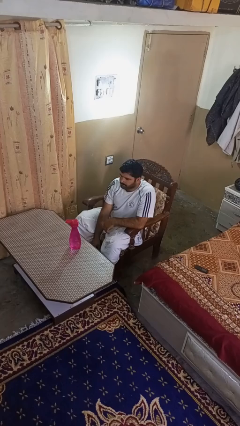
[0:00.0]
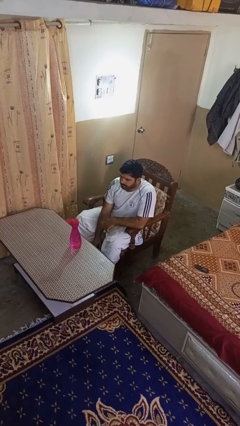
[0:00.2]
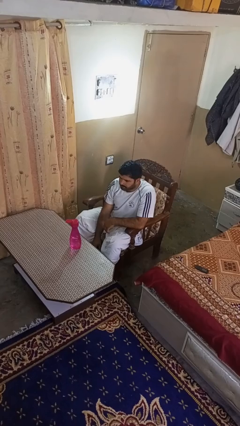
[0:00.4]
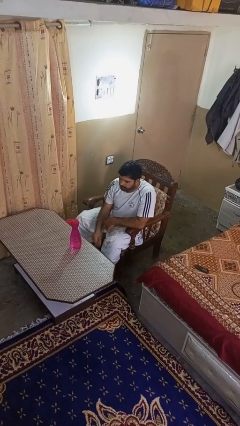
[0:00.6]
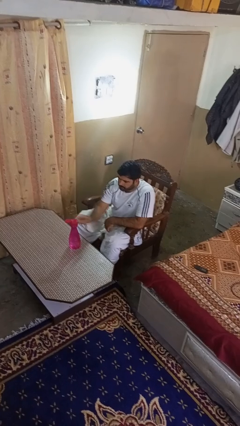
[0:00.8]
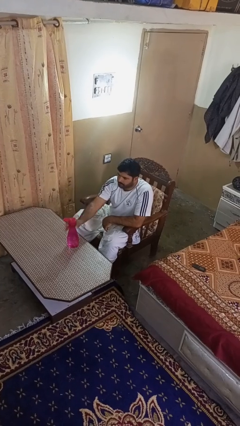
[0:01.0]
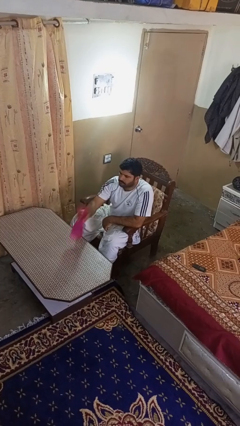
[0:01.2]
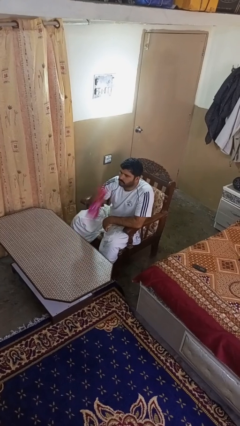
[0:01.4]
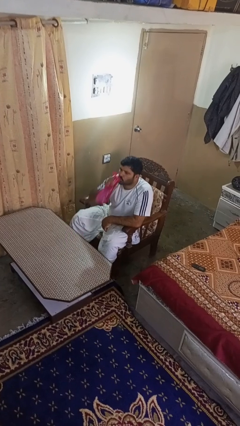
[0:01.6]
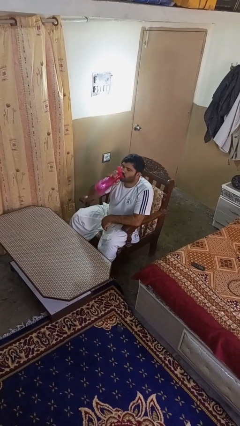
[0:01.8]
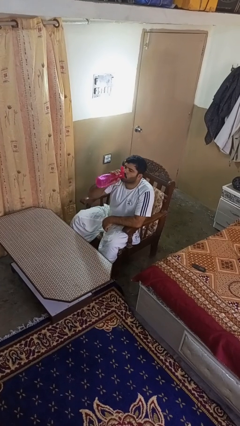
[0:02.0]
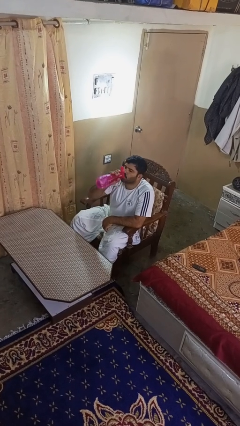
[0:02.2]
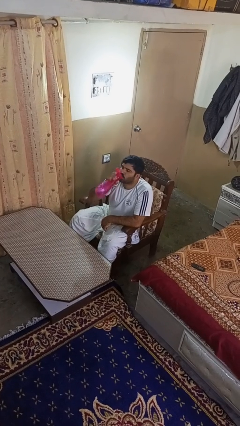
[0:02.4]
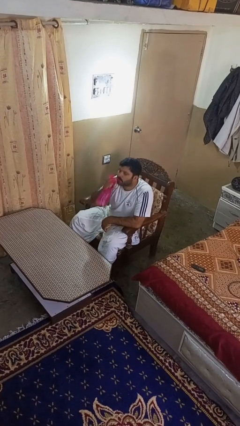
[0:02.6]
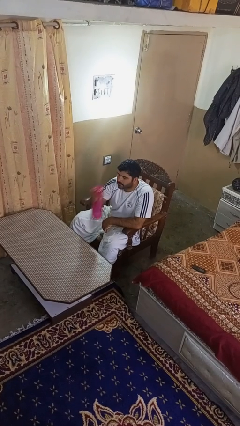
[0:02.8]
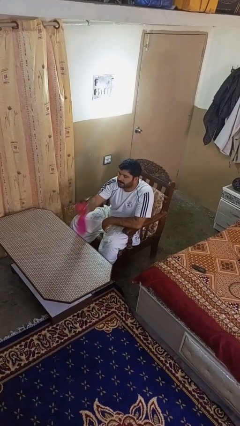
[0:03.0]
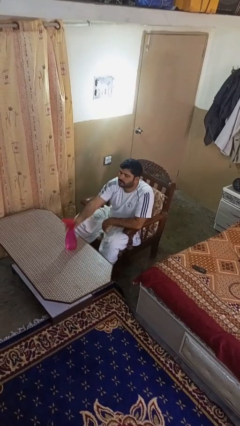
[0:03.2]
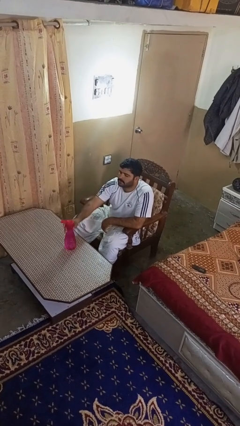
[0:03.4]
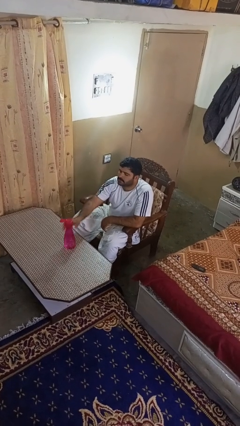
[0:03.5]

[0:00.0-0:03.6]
person drinks from bottle

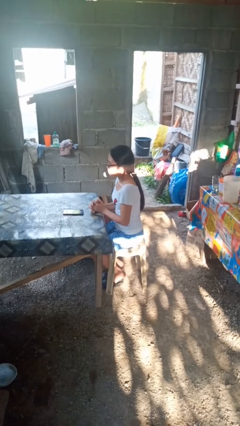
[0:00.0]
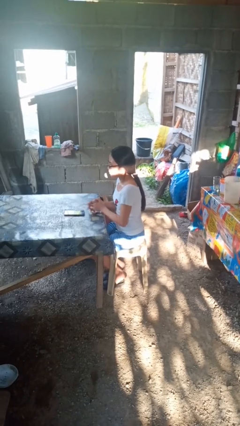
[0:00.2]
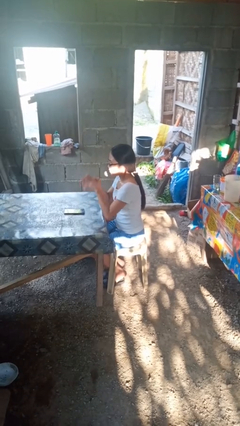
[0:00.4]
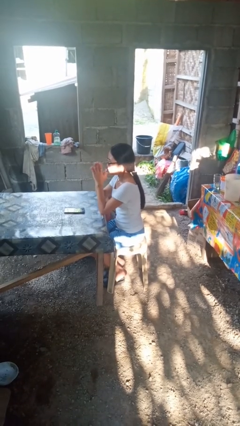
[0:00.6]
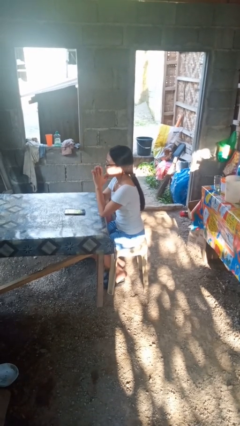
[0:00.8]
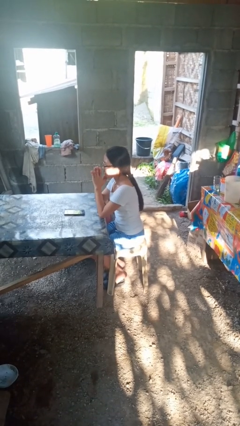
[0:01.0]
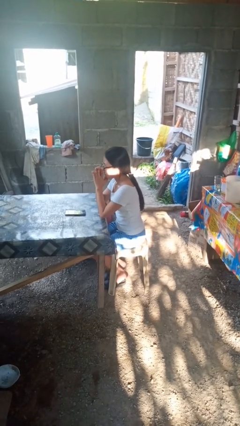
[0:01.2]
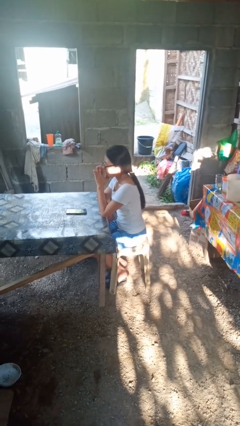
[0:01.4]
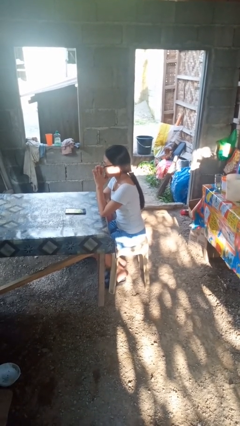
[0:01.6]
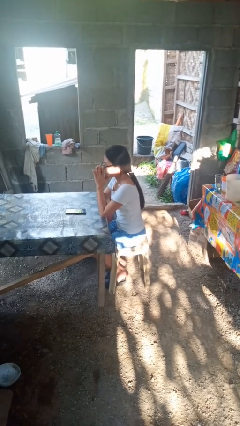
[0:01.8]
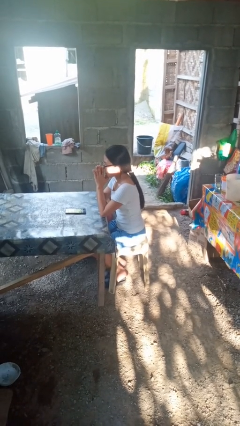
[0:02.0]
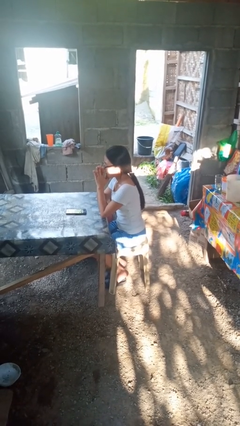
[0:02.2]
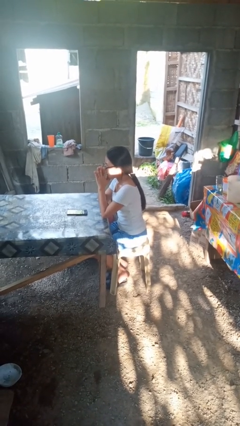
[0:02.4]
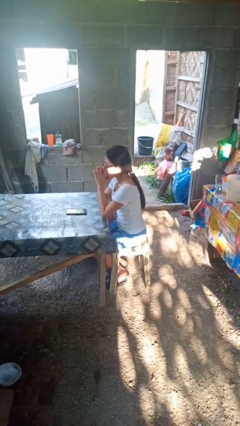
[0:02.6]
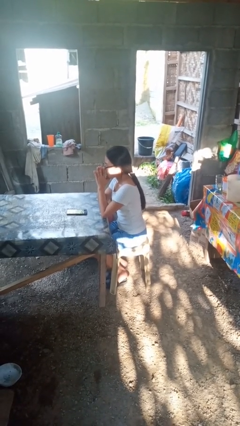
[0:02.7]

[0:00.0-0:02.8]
person prays

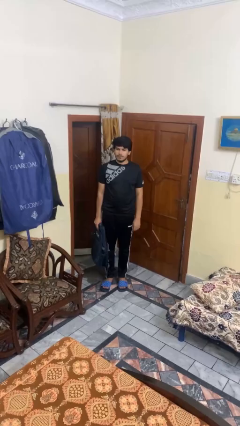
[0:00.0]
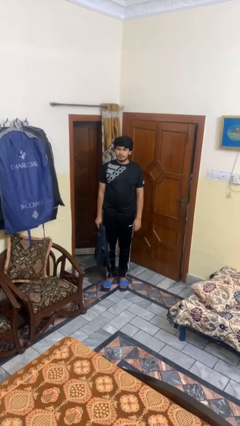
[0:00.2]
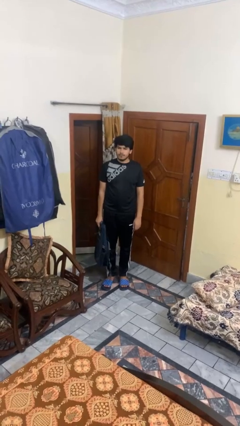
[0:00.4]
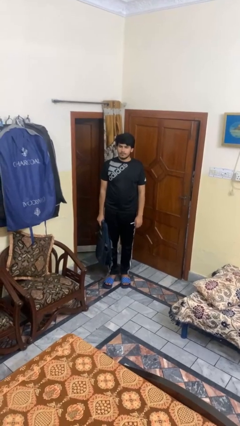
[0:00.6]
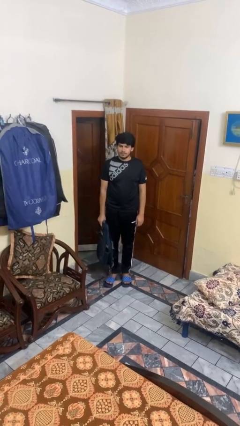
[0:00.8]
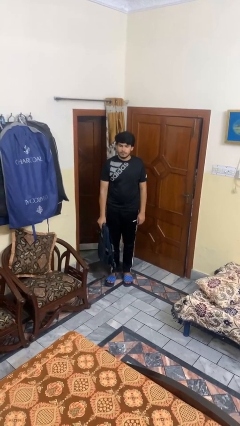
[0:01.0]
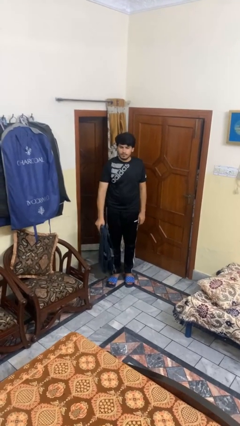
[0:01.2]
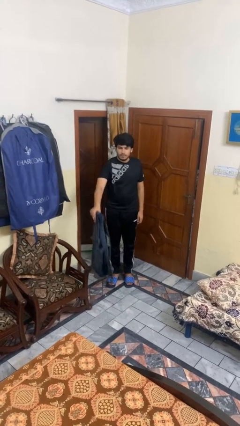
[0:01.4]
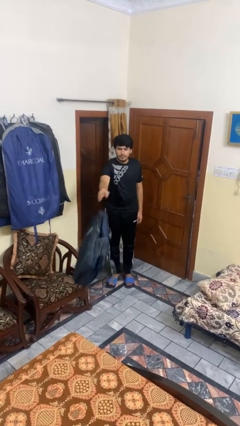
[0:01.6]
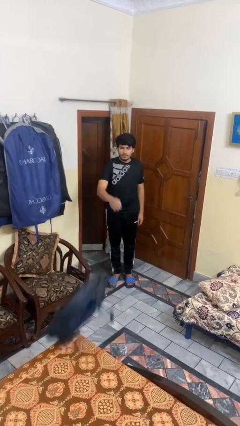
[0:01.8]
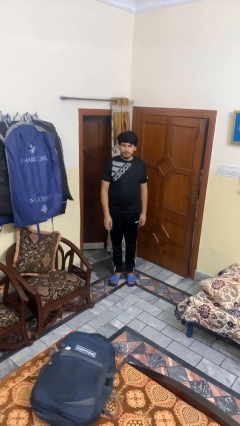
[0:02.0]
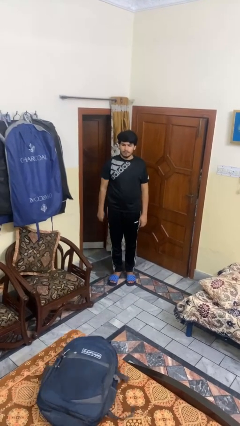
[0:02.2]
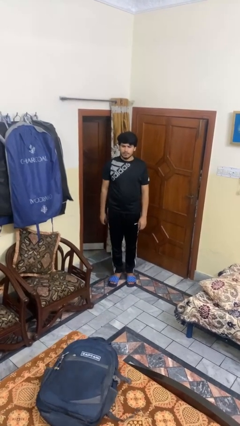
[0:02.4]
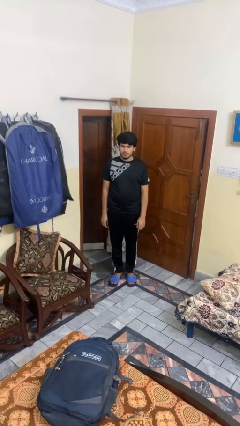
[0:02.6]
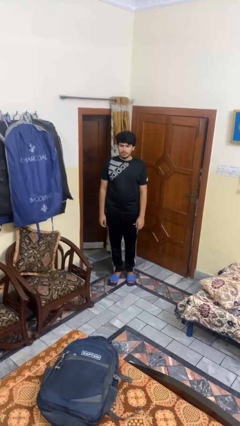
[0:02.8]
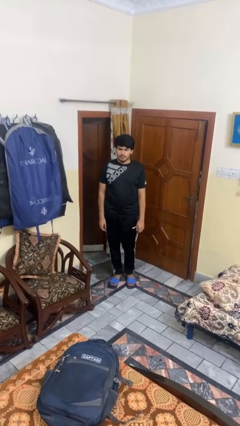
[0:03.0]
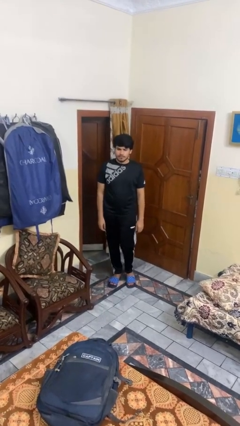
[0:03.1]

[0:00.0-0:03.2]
person throws object on bed

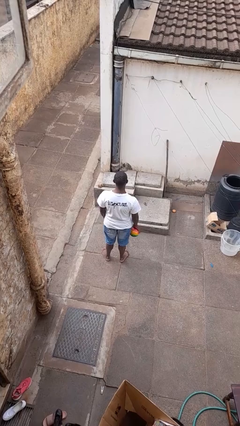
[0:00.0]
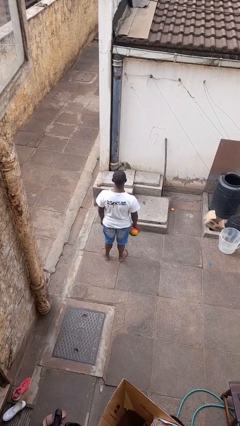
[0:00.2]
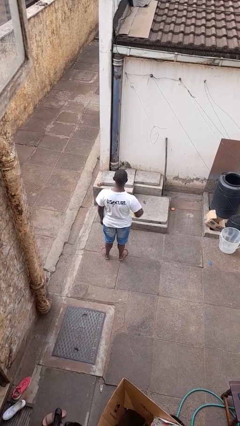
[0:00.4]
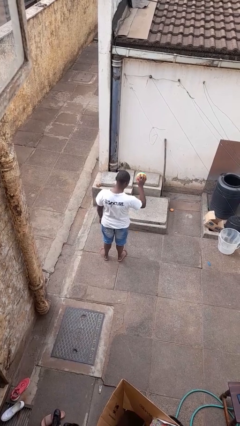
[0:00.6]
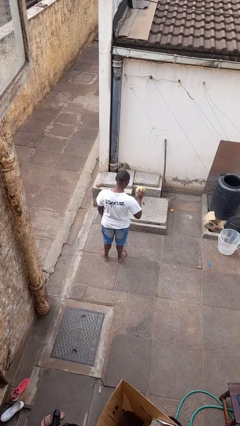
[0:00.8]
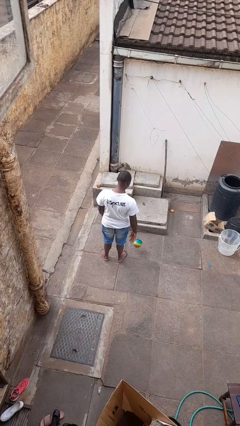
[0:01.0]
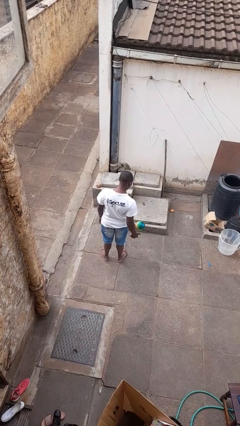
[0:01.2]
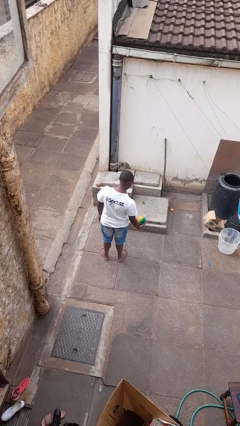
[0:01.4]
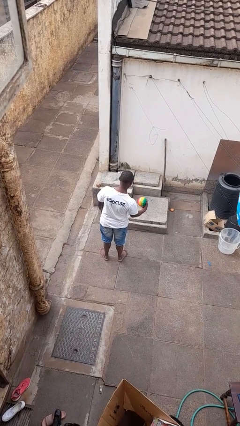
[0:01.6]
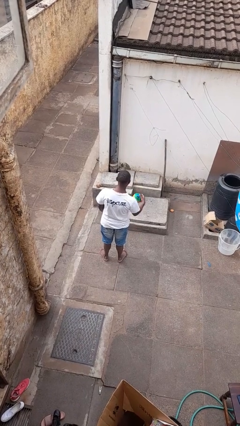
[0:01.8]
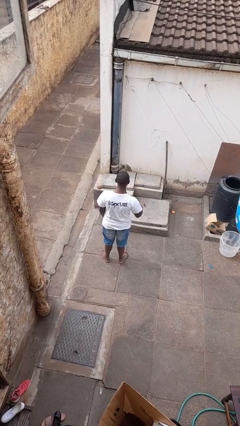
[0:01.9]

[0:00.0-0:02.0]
person bounces ball on floor

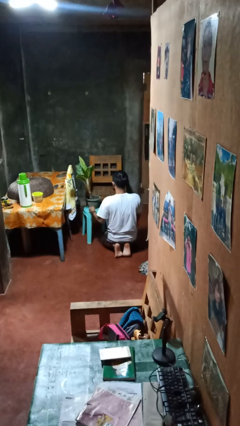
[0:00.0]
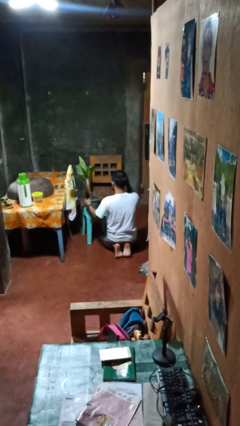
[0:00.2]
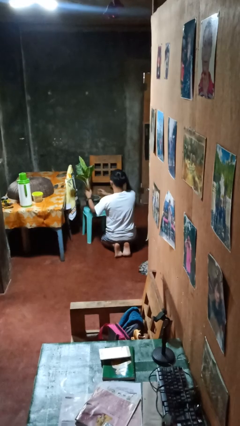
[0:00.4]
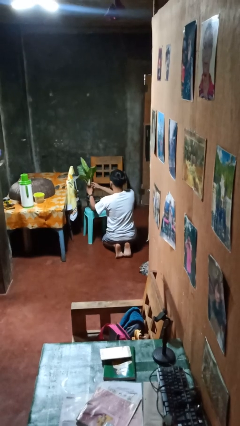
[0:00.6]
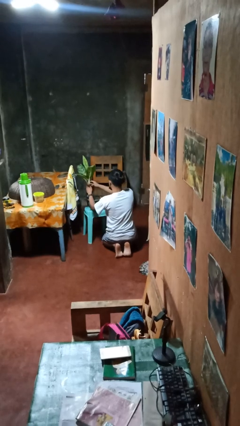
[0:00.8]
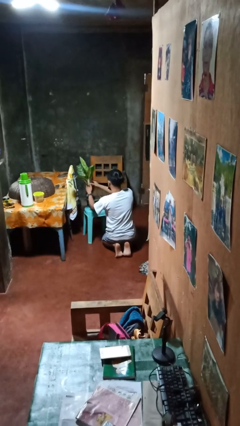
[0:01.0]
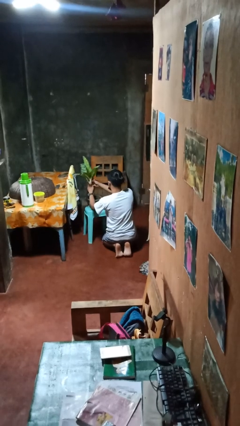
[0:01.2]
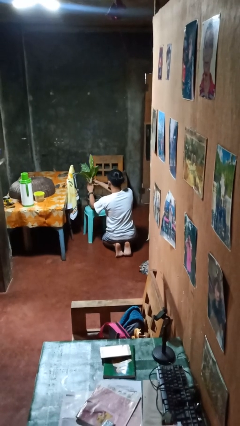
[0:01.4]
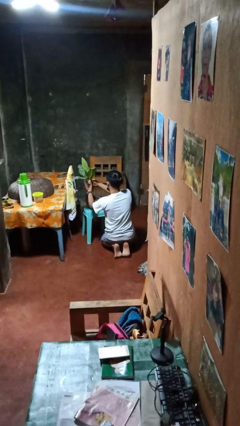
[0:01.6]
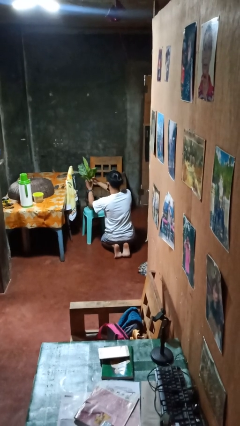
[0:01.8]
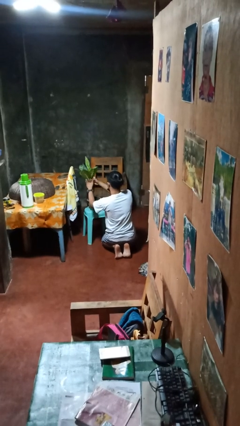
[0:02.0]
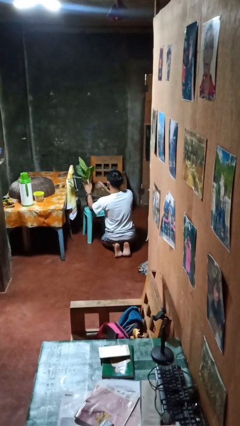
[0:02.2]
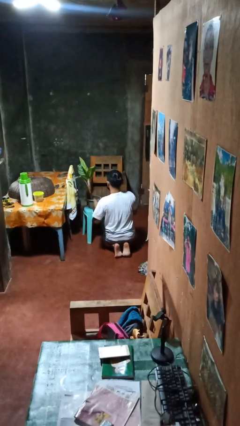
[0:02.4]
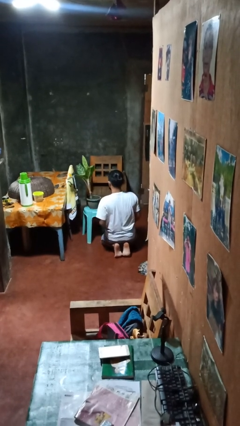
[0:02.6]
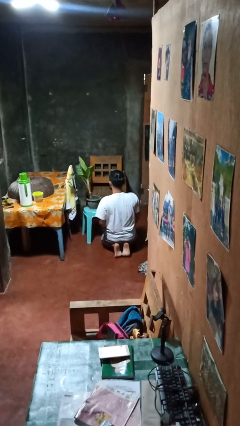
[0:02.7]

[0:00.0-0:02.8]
person arranges flowers in vase

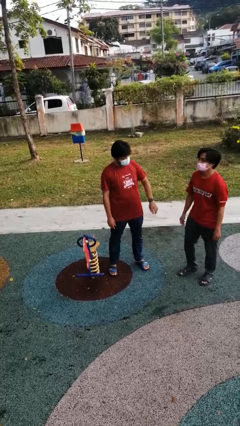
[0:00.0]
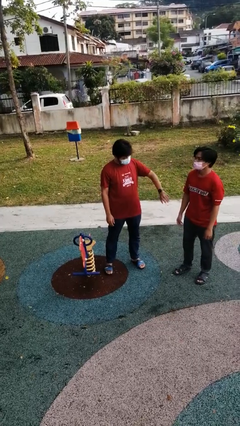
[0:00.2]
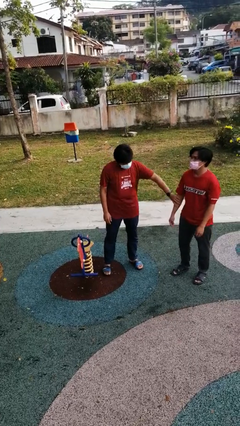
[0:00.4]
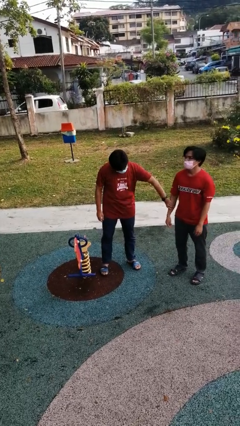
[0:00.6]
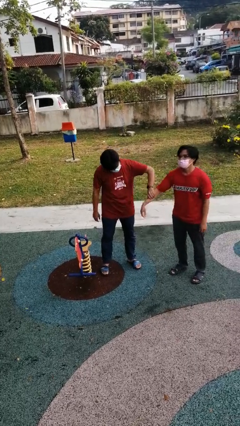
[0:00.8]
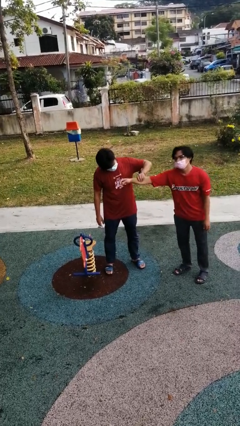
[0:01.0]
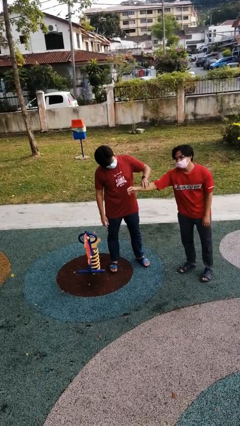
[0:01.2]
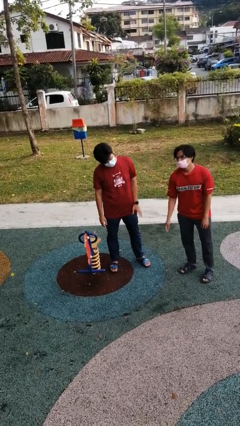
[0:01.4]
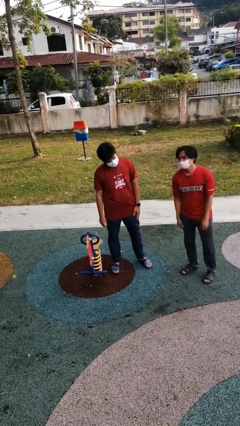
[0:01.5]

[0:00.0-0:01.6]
person grabs person by forearm

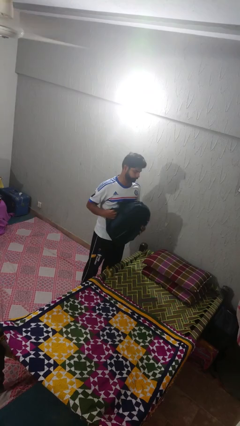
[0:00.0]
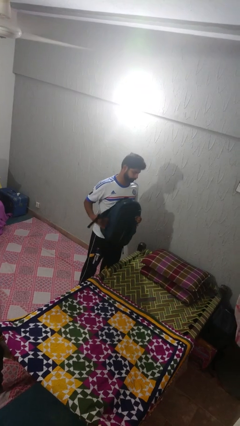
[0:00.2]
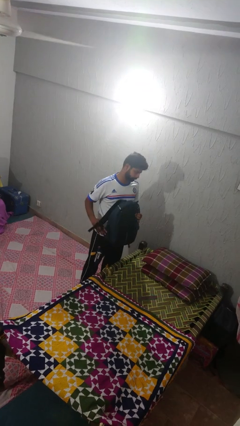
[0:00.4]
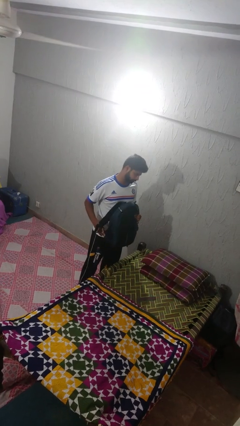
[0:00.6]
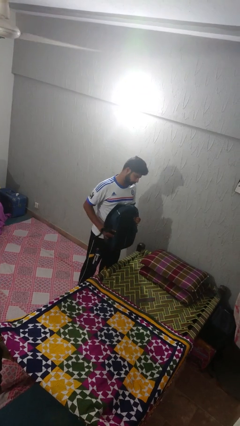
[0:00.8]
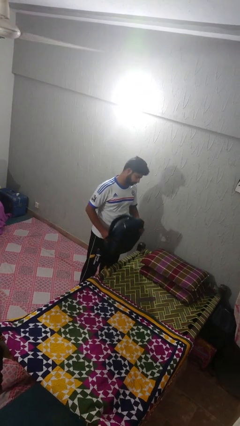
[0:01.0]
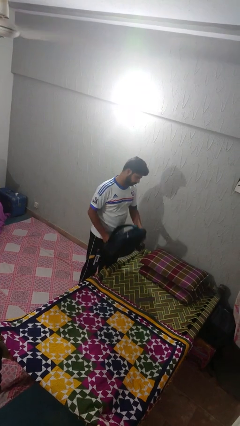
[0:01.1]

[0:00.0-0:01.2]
person puts down object on bed
